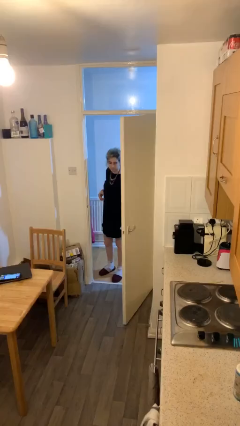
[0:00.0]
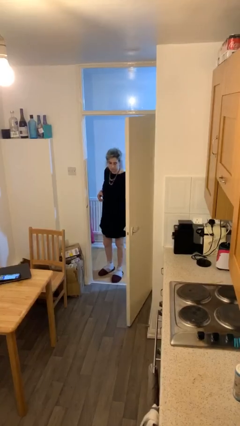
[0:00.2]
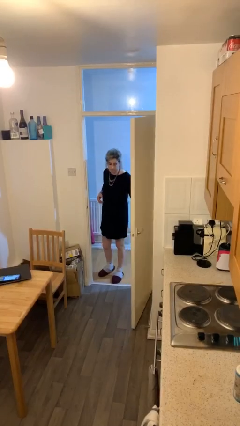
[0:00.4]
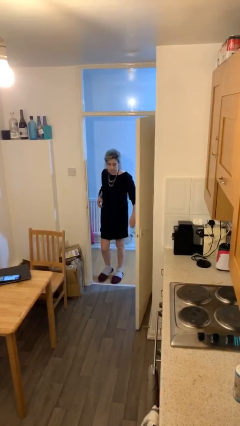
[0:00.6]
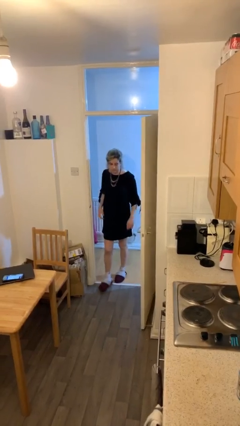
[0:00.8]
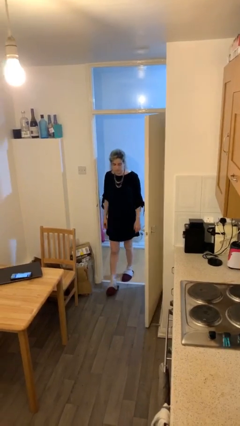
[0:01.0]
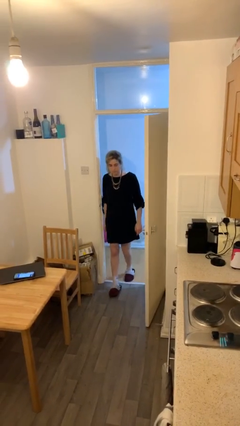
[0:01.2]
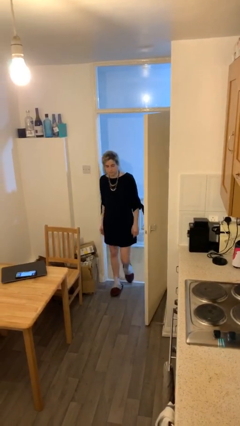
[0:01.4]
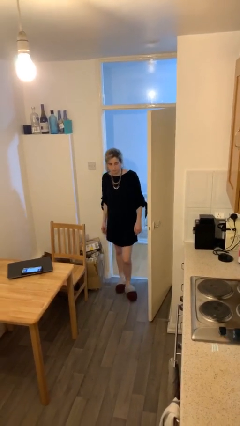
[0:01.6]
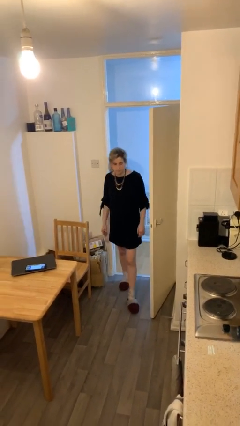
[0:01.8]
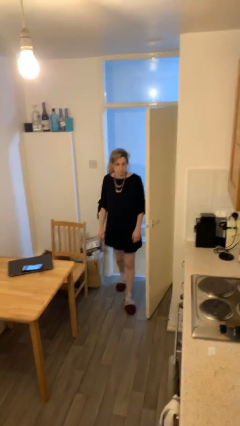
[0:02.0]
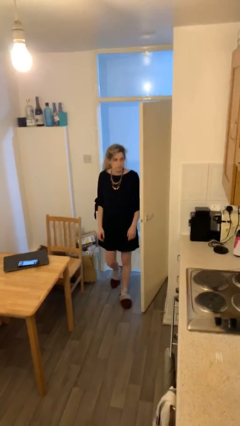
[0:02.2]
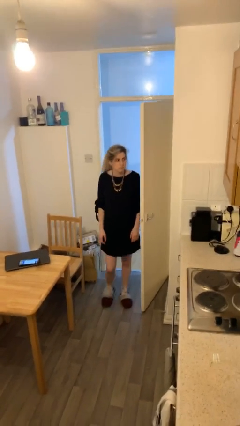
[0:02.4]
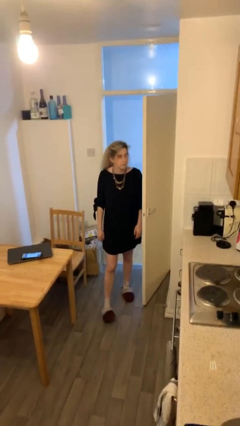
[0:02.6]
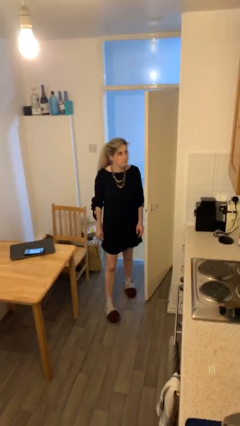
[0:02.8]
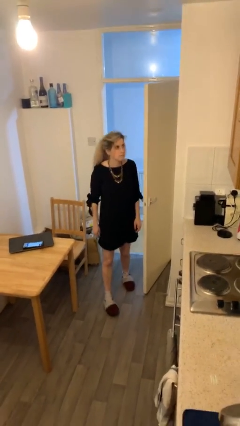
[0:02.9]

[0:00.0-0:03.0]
person enters scene through structure

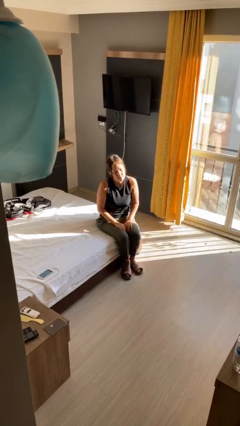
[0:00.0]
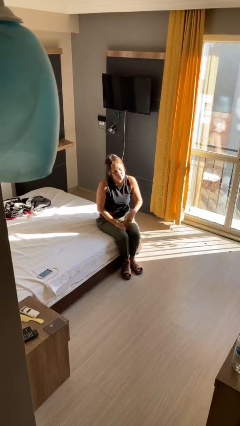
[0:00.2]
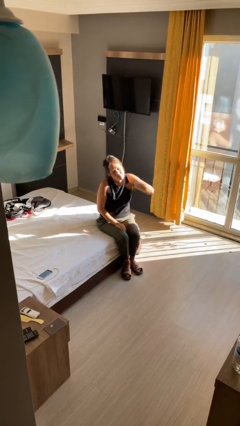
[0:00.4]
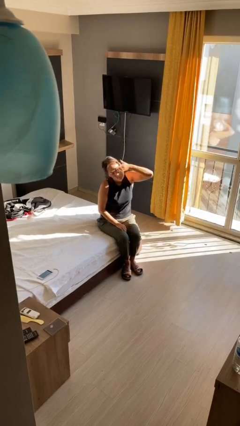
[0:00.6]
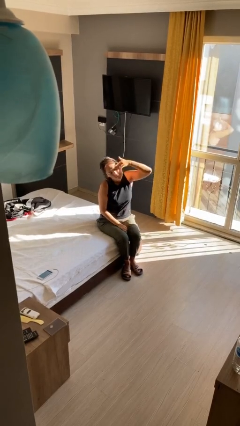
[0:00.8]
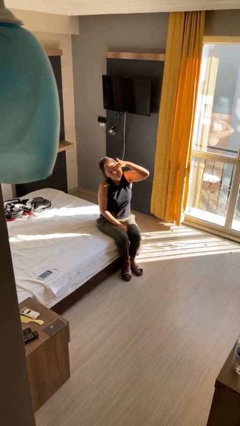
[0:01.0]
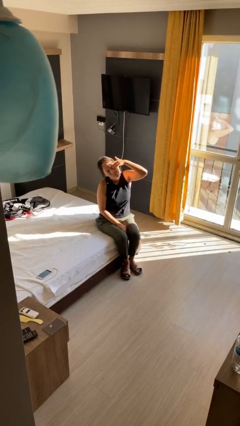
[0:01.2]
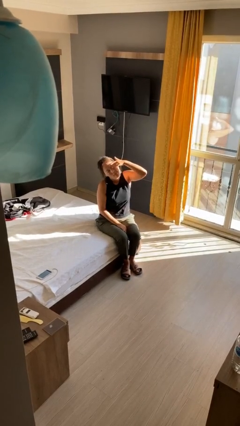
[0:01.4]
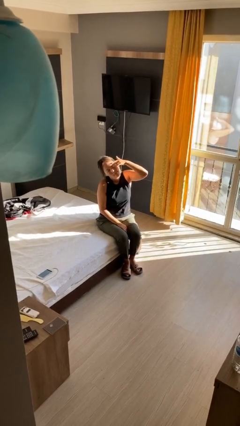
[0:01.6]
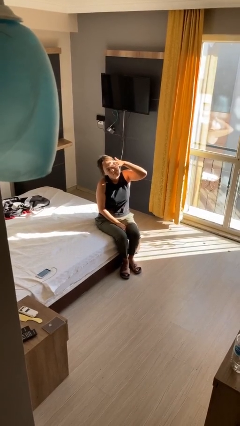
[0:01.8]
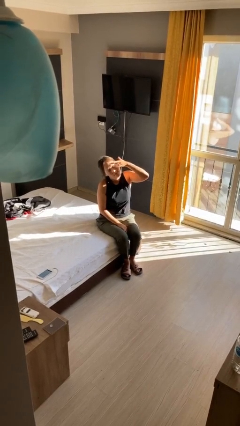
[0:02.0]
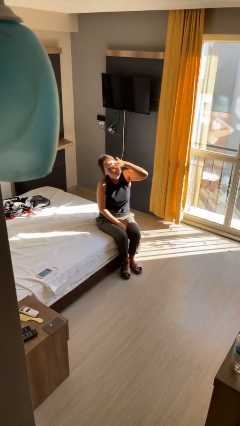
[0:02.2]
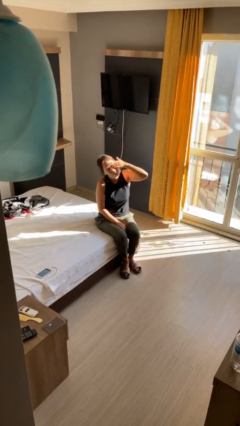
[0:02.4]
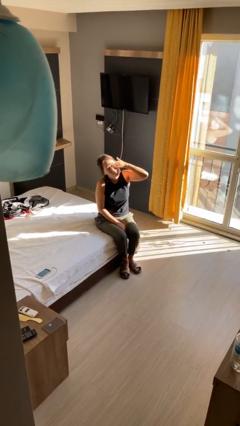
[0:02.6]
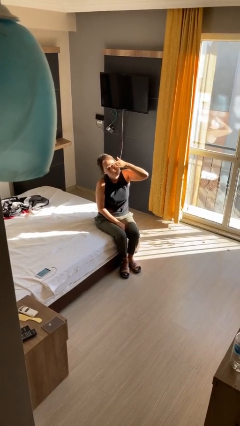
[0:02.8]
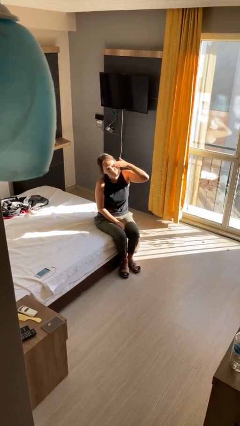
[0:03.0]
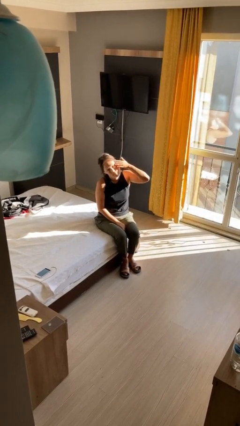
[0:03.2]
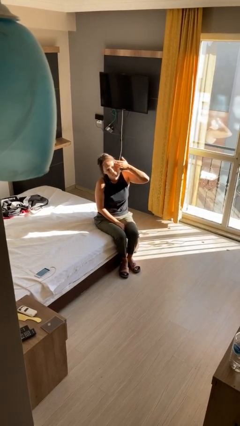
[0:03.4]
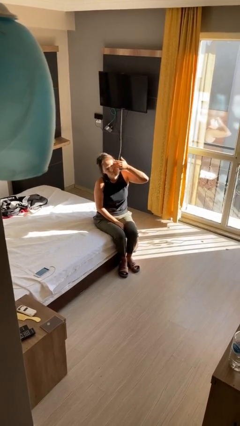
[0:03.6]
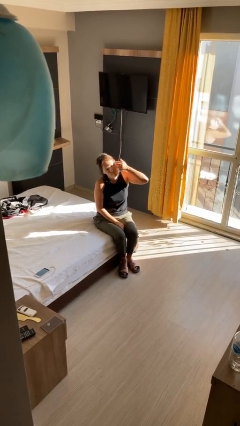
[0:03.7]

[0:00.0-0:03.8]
person rubs eyes

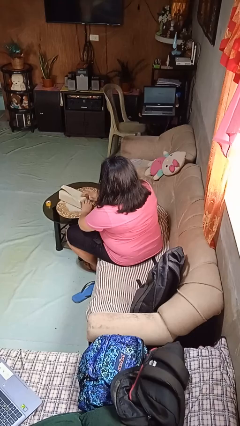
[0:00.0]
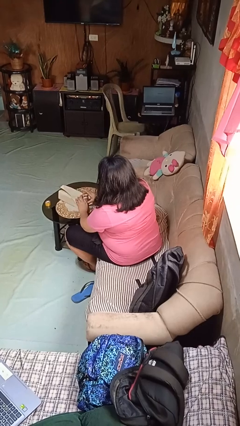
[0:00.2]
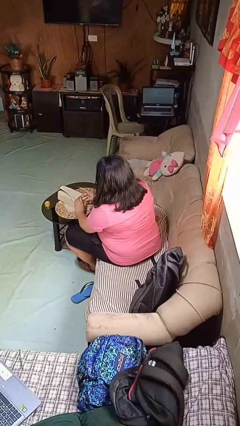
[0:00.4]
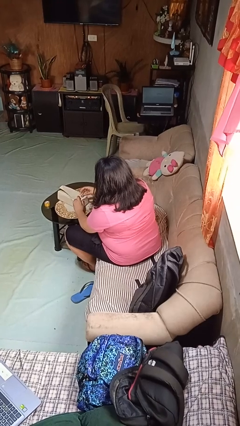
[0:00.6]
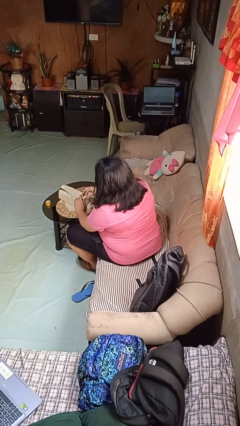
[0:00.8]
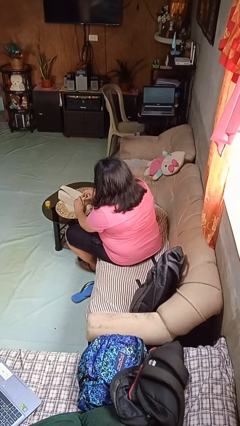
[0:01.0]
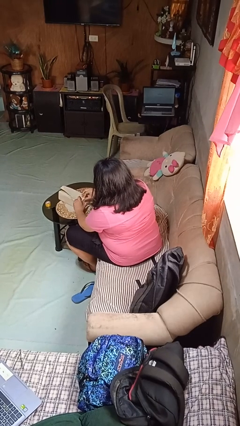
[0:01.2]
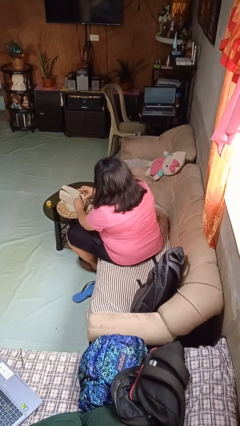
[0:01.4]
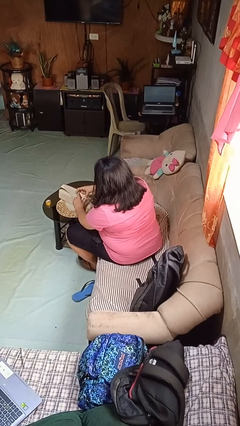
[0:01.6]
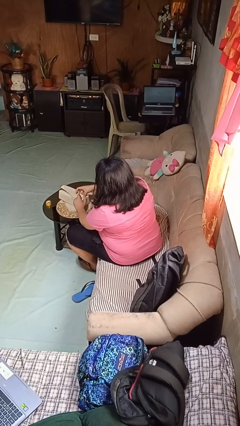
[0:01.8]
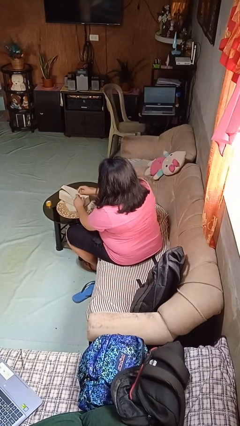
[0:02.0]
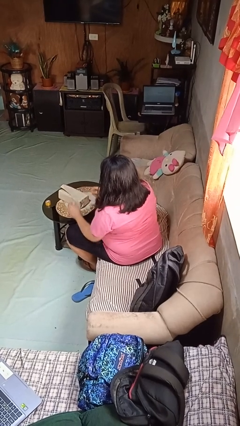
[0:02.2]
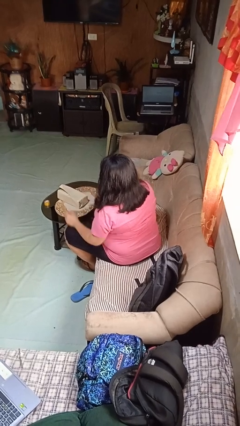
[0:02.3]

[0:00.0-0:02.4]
person wraps box

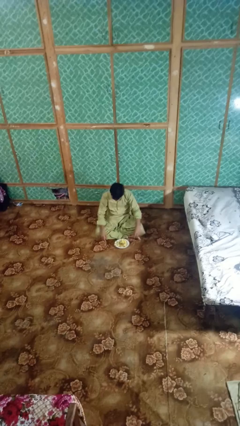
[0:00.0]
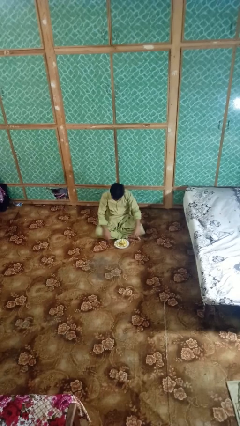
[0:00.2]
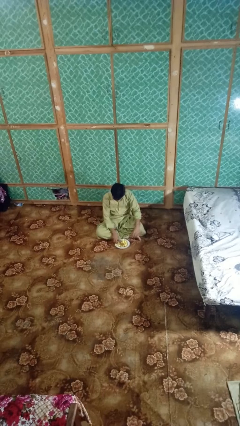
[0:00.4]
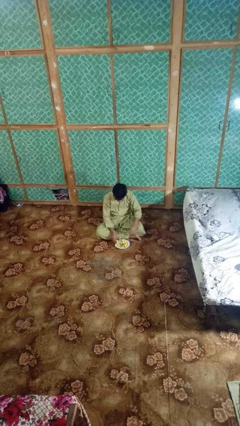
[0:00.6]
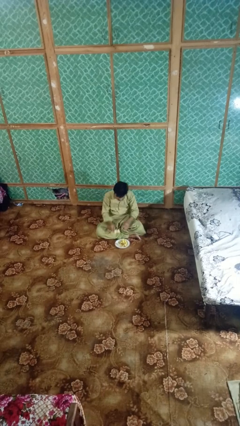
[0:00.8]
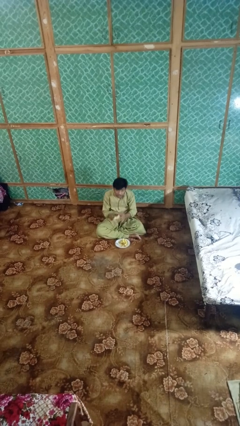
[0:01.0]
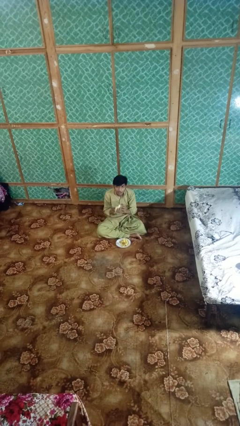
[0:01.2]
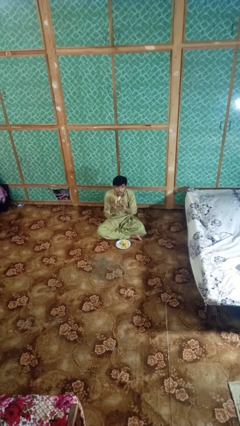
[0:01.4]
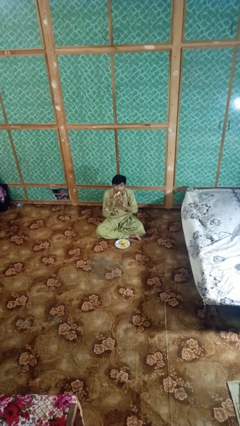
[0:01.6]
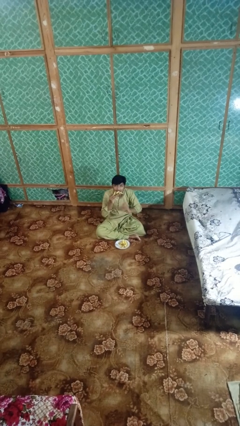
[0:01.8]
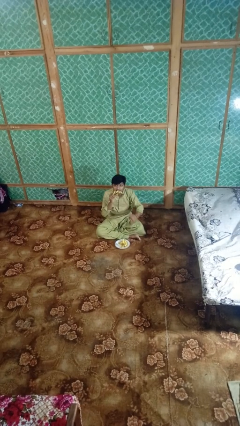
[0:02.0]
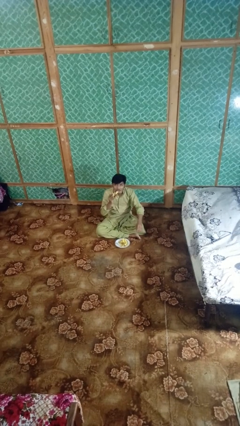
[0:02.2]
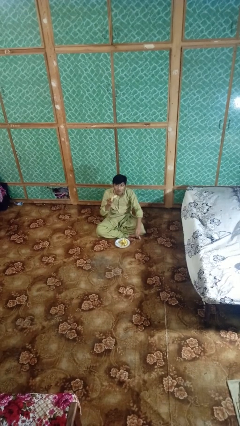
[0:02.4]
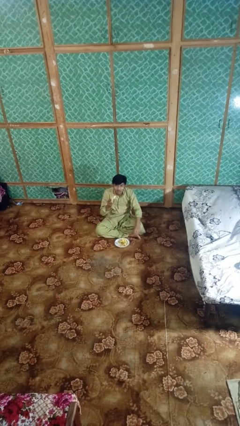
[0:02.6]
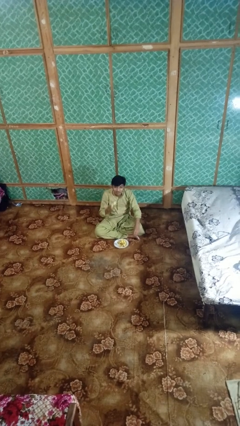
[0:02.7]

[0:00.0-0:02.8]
person eats banana

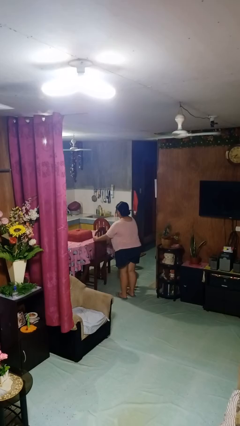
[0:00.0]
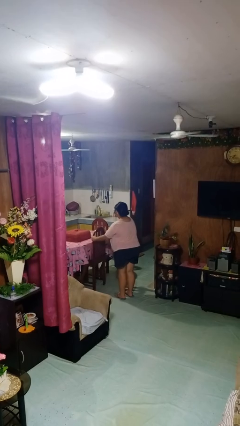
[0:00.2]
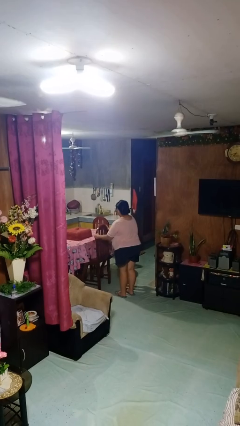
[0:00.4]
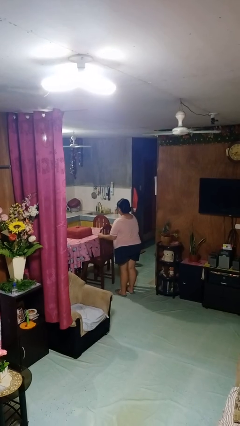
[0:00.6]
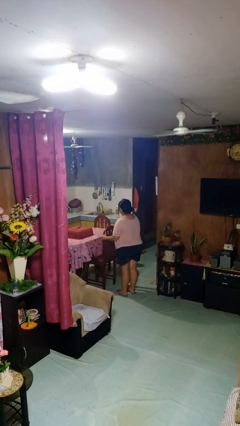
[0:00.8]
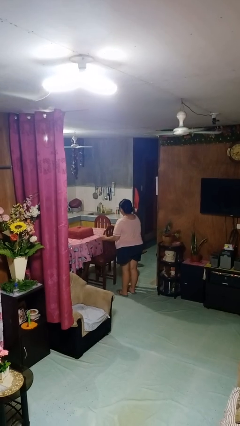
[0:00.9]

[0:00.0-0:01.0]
person pulls out chair

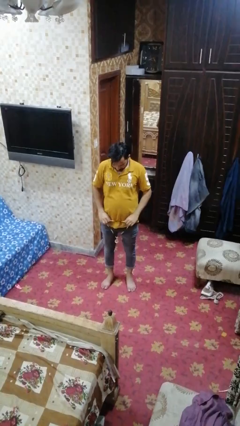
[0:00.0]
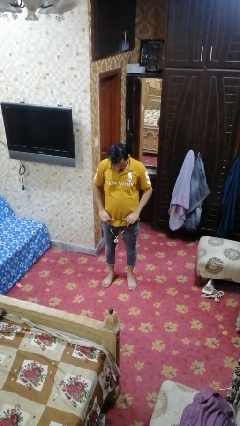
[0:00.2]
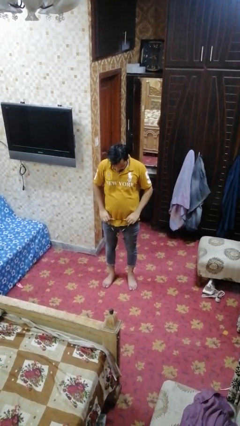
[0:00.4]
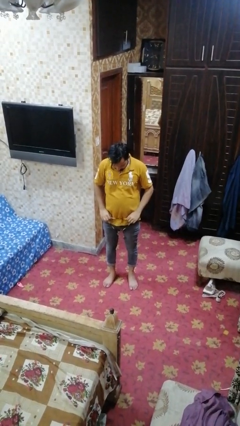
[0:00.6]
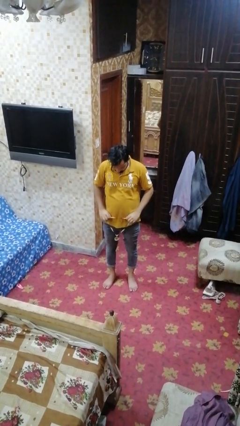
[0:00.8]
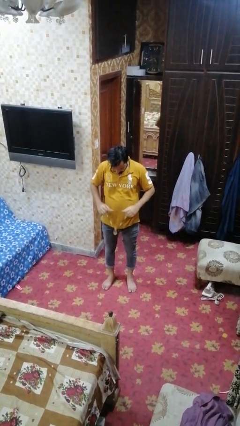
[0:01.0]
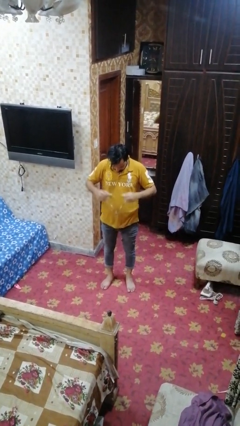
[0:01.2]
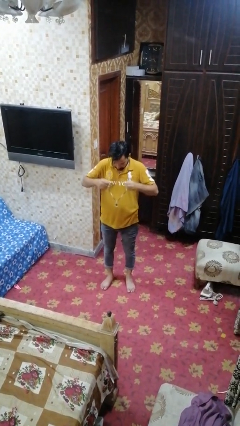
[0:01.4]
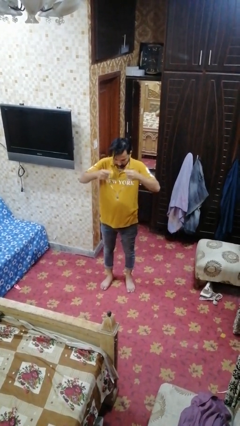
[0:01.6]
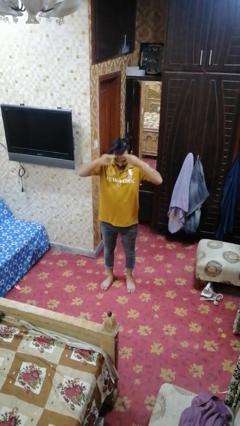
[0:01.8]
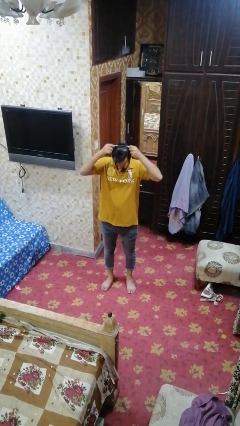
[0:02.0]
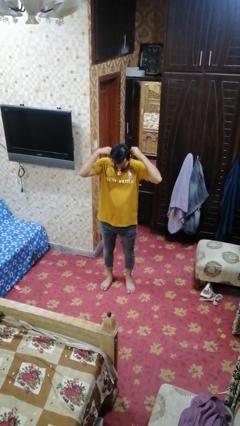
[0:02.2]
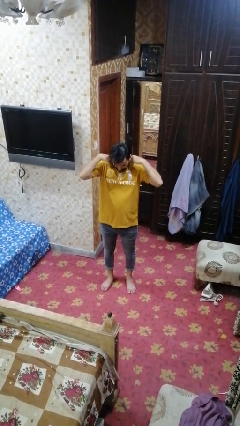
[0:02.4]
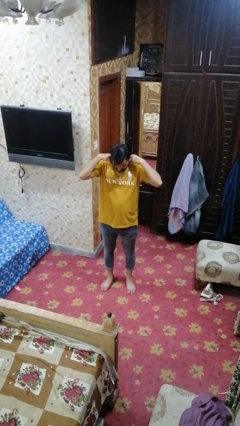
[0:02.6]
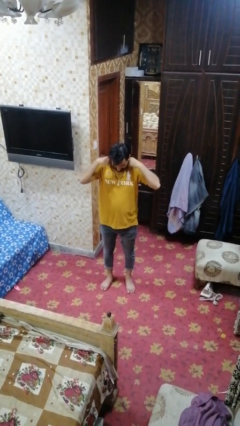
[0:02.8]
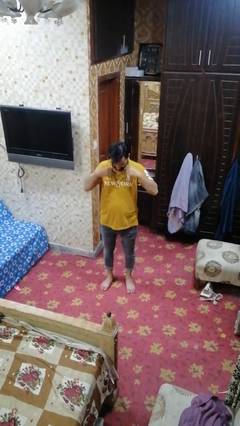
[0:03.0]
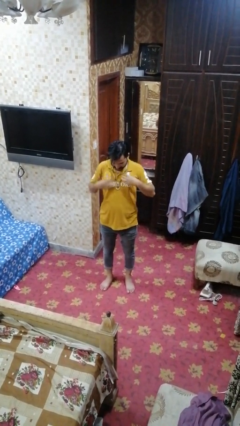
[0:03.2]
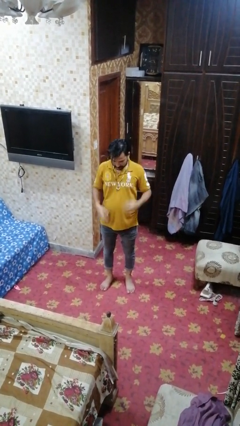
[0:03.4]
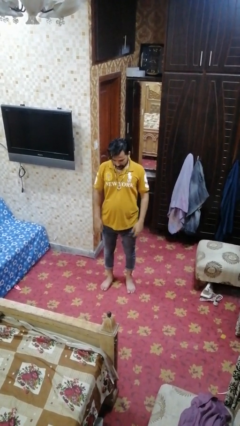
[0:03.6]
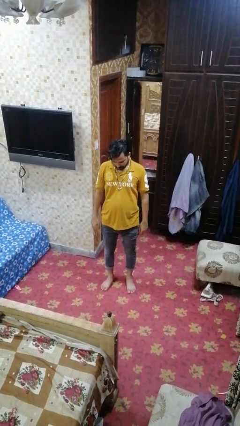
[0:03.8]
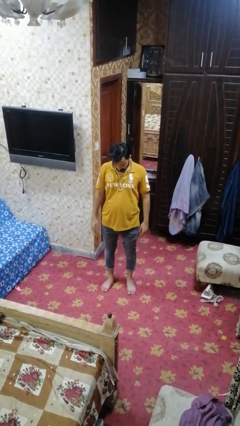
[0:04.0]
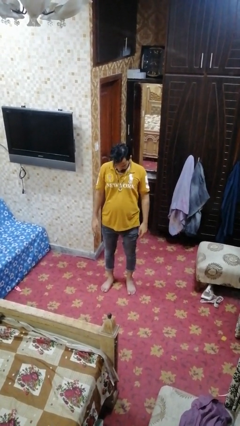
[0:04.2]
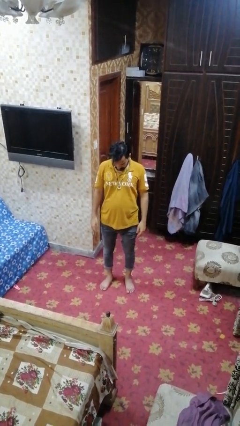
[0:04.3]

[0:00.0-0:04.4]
person puts on necklace
